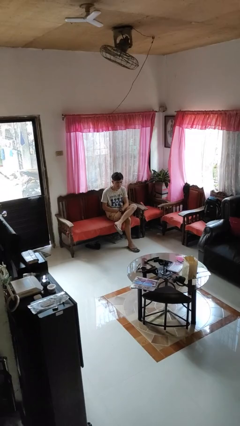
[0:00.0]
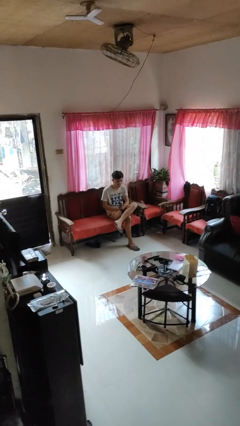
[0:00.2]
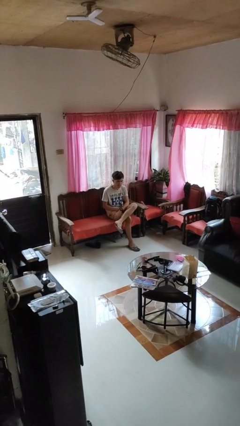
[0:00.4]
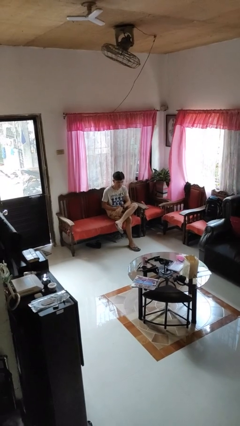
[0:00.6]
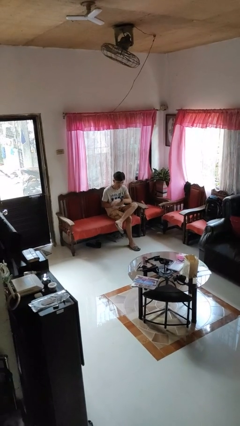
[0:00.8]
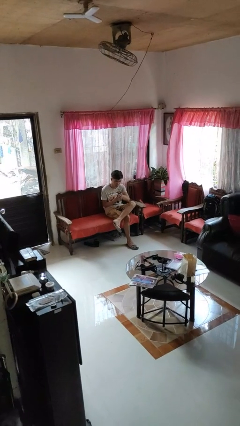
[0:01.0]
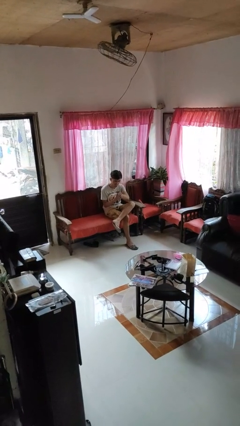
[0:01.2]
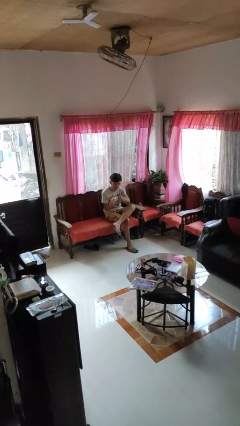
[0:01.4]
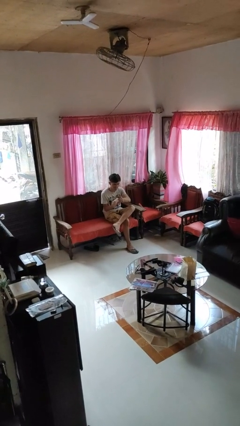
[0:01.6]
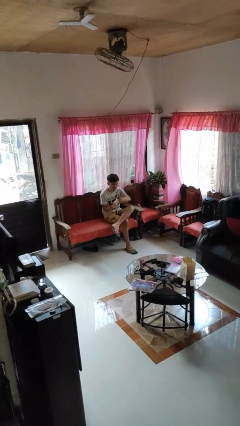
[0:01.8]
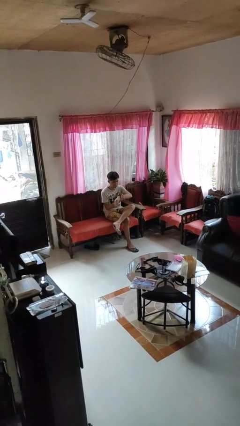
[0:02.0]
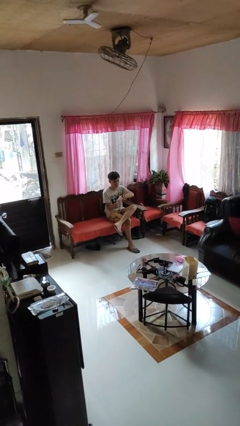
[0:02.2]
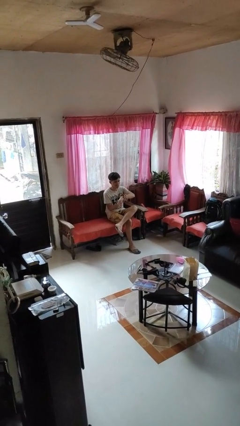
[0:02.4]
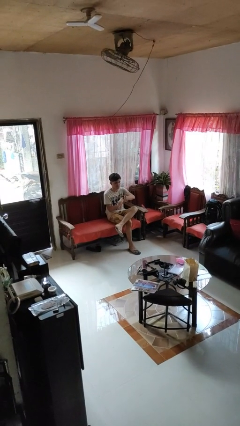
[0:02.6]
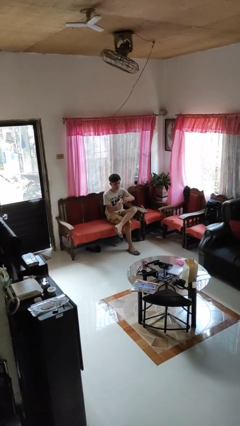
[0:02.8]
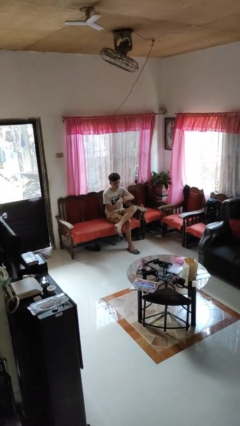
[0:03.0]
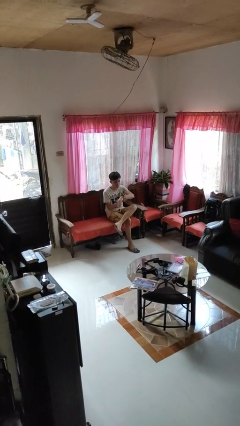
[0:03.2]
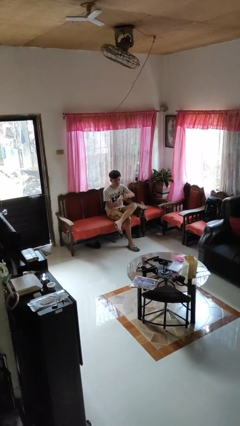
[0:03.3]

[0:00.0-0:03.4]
person looks at wristwatch

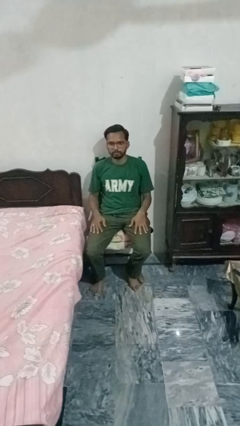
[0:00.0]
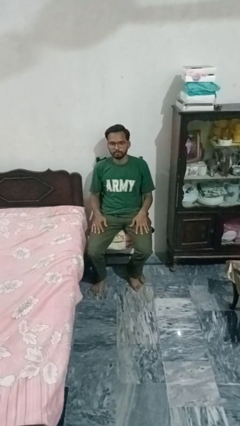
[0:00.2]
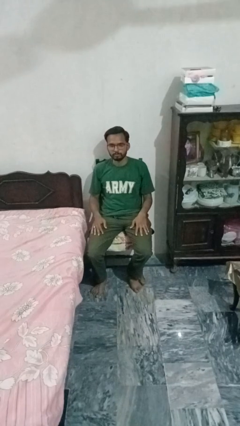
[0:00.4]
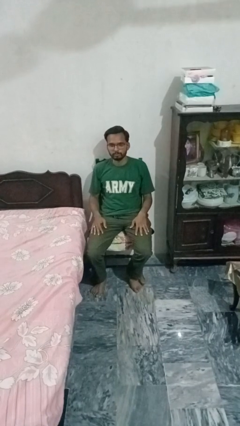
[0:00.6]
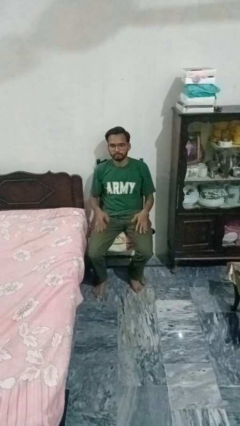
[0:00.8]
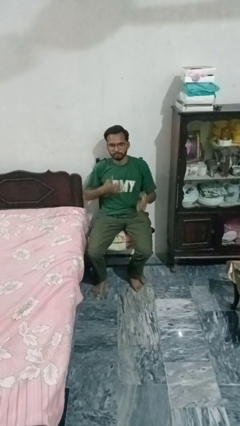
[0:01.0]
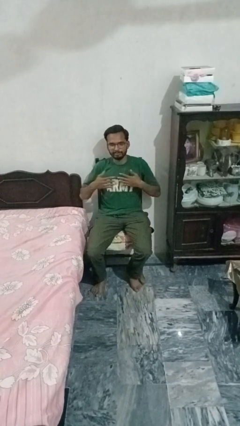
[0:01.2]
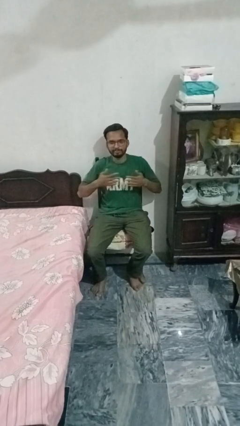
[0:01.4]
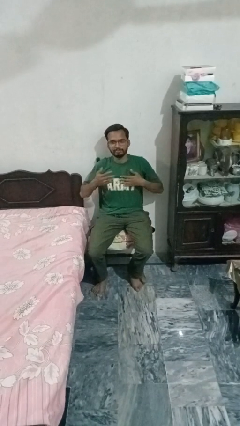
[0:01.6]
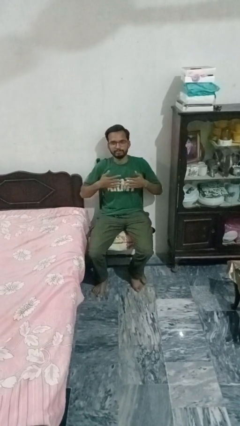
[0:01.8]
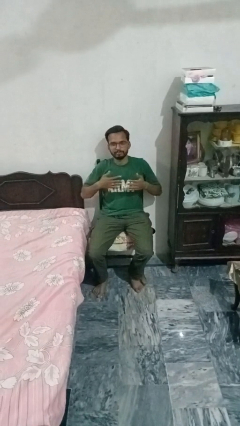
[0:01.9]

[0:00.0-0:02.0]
person drums on chest

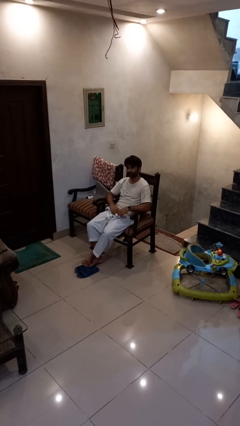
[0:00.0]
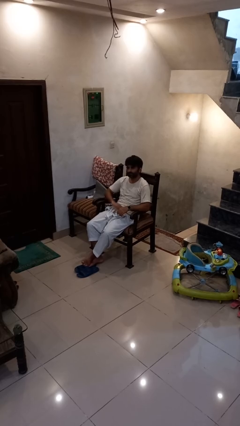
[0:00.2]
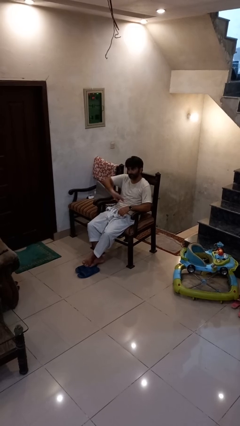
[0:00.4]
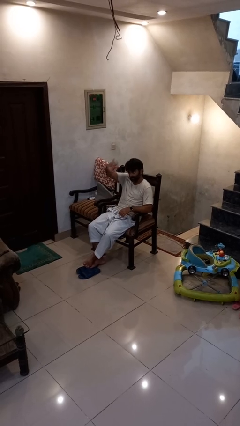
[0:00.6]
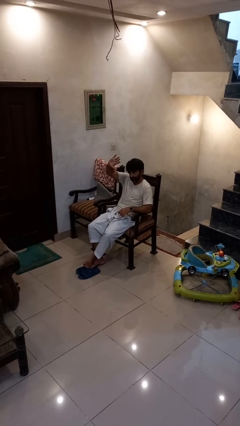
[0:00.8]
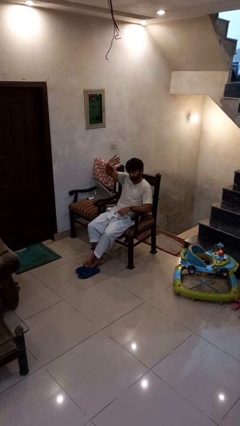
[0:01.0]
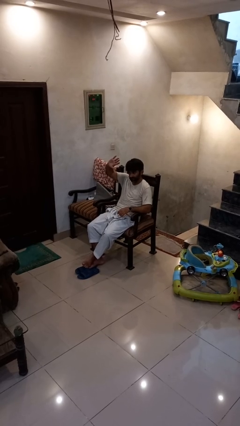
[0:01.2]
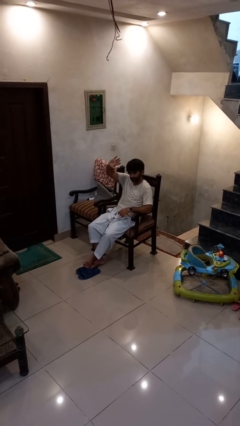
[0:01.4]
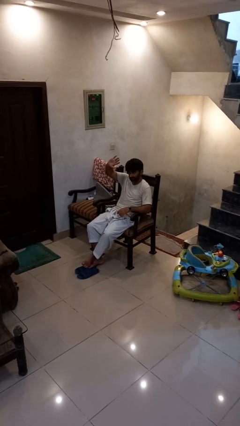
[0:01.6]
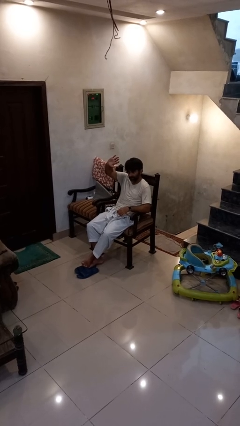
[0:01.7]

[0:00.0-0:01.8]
person gestures swipe up

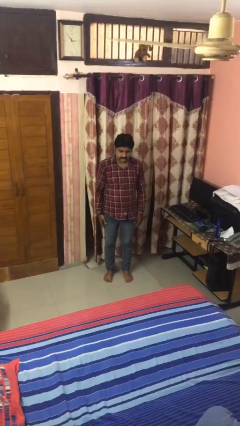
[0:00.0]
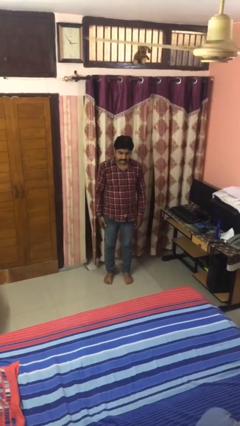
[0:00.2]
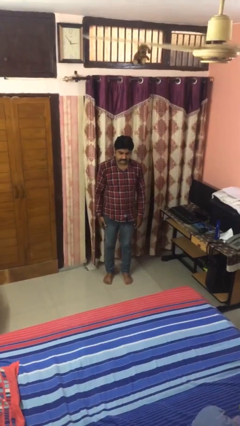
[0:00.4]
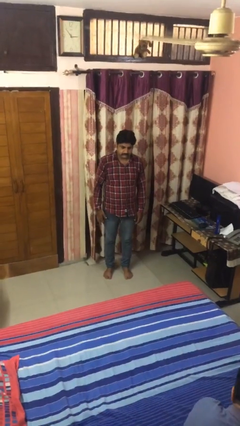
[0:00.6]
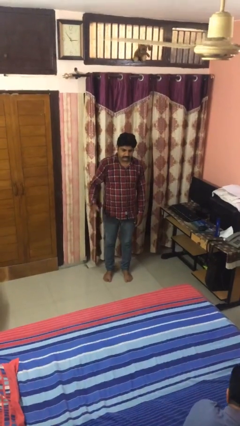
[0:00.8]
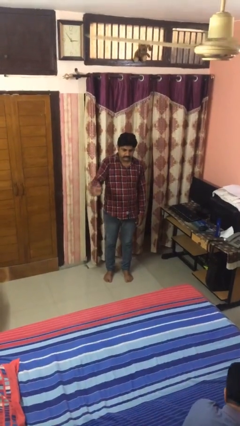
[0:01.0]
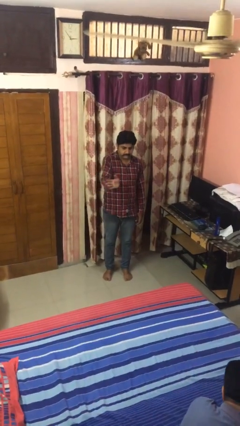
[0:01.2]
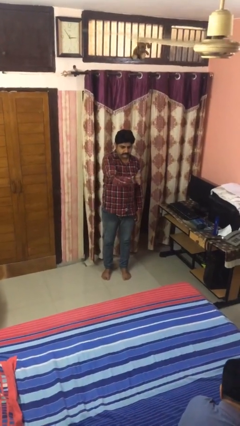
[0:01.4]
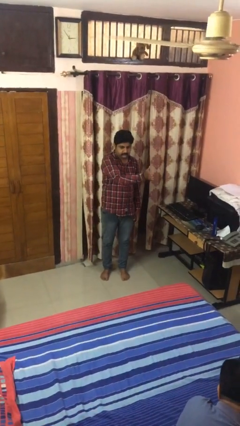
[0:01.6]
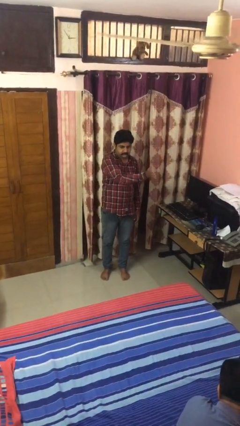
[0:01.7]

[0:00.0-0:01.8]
person gestures swipe left

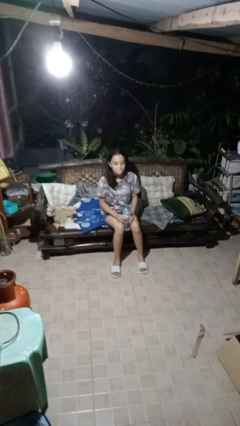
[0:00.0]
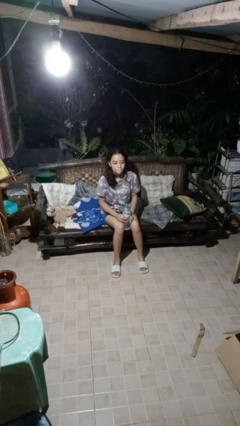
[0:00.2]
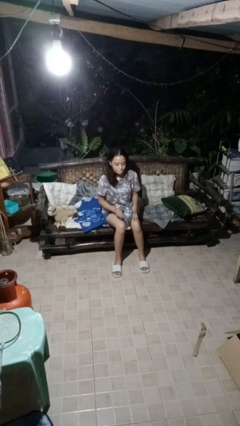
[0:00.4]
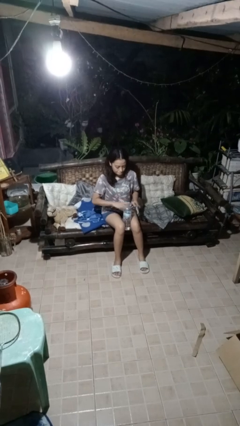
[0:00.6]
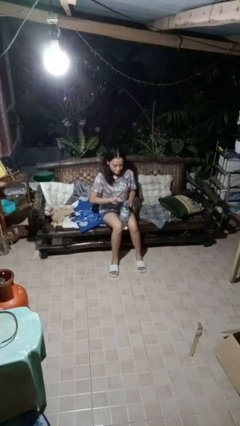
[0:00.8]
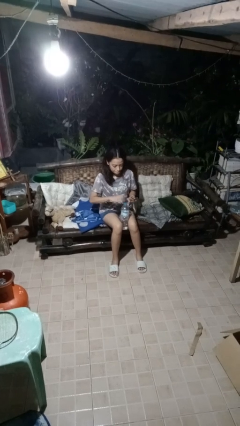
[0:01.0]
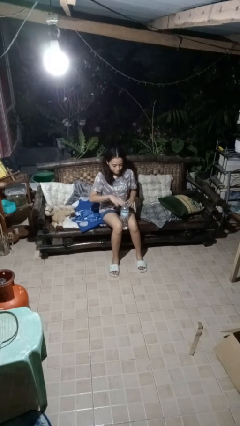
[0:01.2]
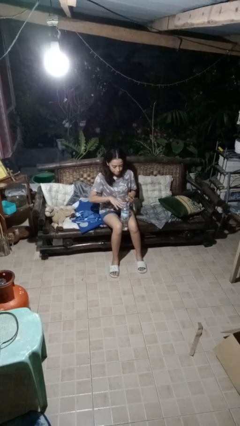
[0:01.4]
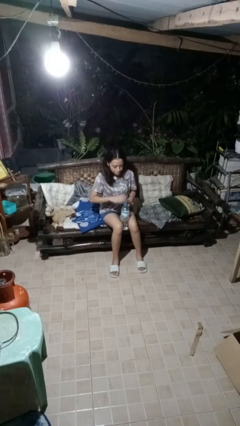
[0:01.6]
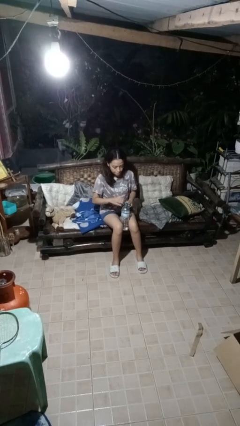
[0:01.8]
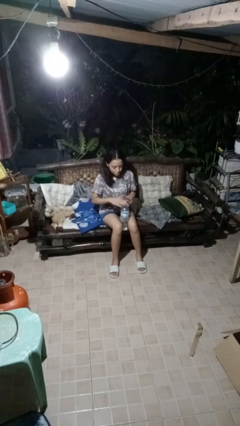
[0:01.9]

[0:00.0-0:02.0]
person taps object with finger

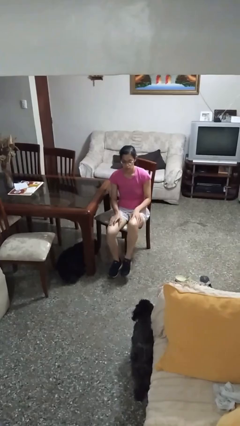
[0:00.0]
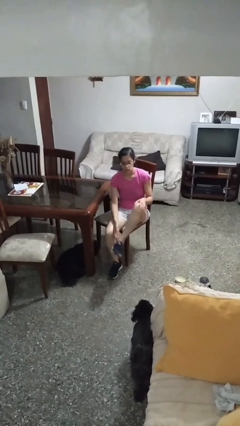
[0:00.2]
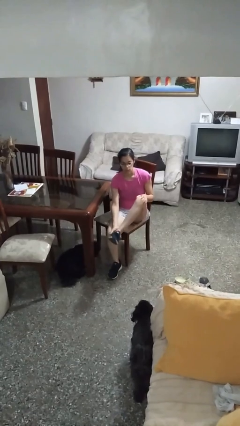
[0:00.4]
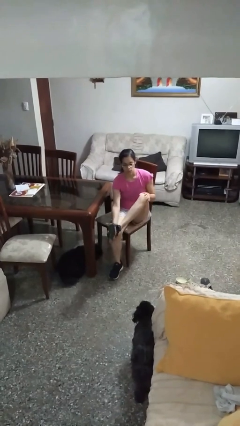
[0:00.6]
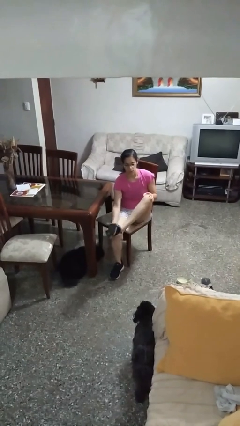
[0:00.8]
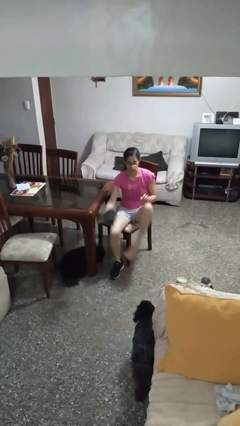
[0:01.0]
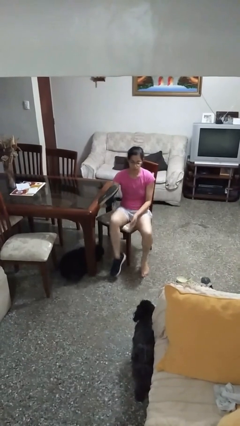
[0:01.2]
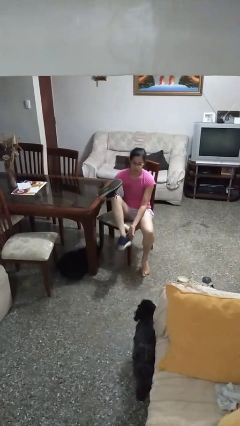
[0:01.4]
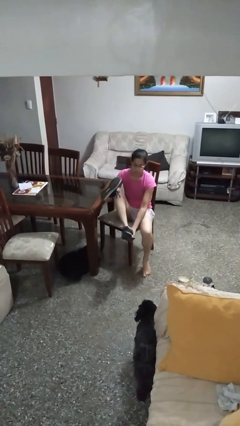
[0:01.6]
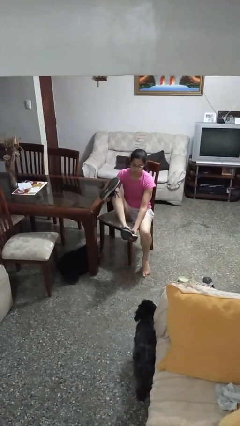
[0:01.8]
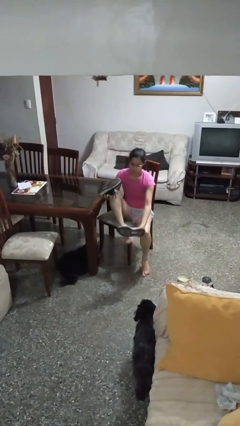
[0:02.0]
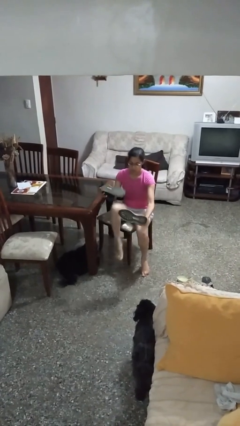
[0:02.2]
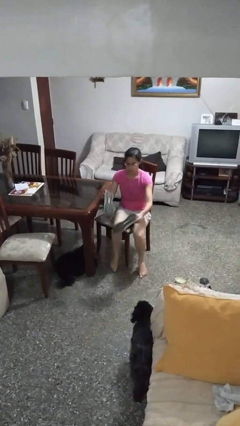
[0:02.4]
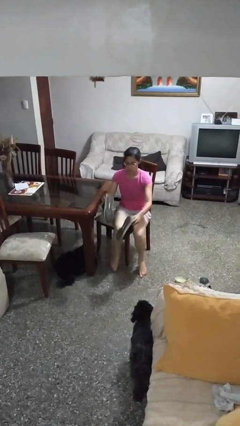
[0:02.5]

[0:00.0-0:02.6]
person takes off shoes

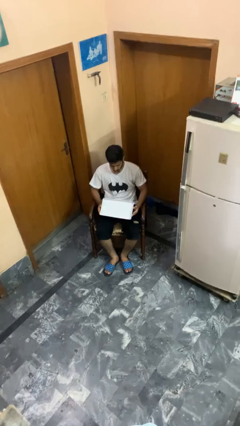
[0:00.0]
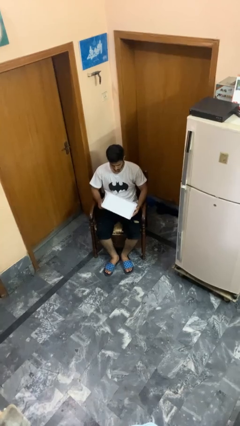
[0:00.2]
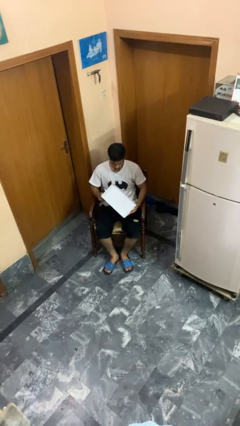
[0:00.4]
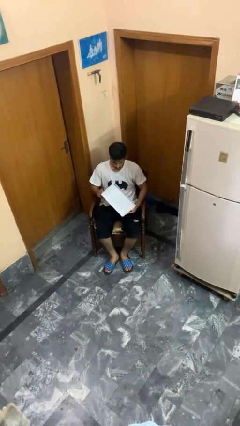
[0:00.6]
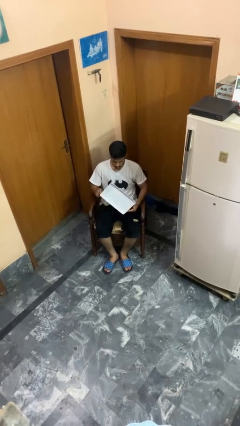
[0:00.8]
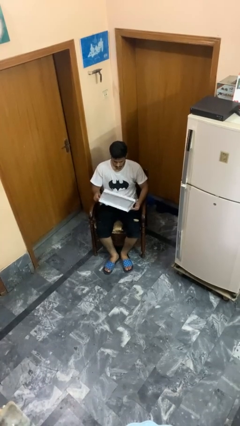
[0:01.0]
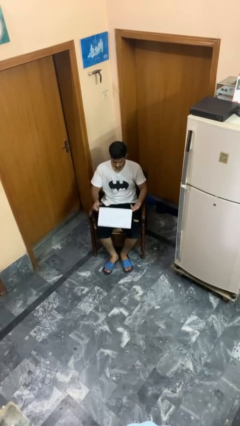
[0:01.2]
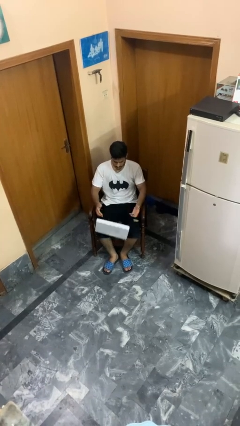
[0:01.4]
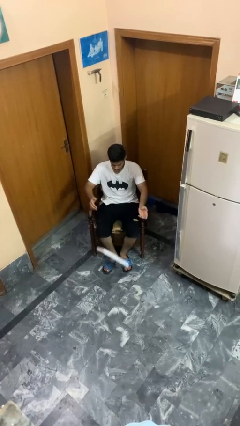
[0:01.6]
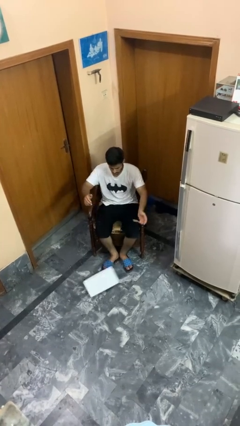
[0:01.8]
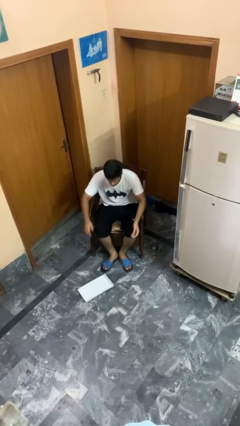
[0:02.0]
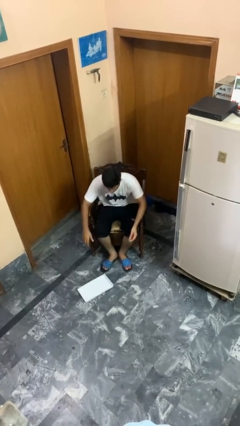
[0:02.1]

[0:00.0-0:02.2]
person drops object

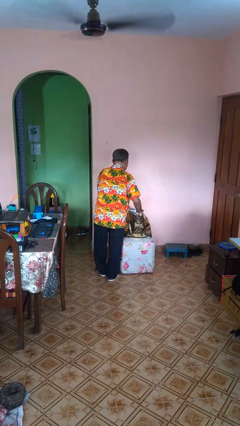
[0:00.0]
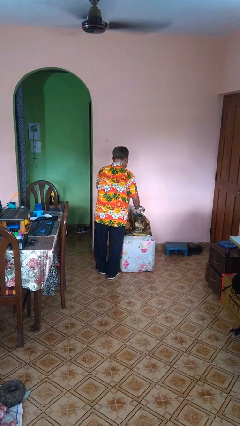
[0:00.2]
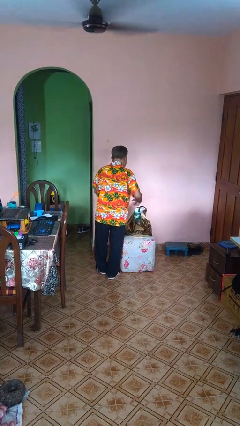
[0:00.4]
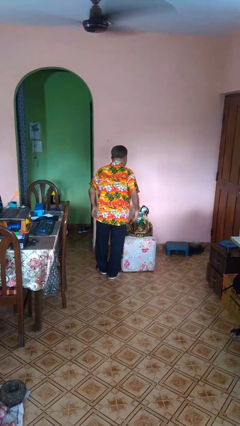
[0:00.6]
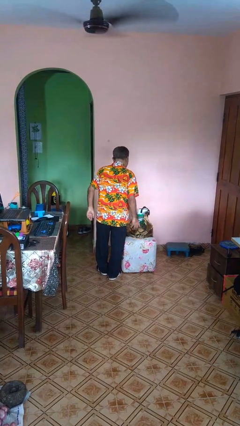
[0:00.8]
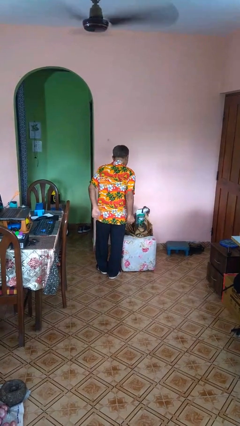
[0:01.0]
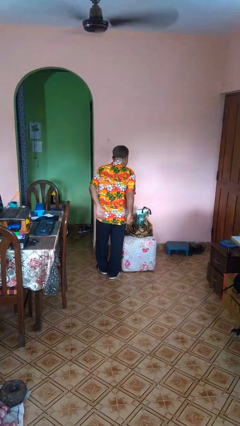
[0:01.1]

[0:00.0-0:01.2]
person puts object into bag
